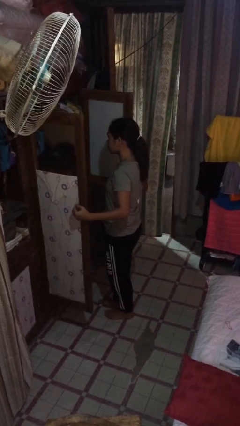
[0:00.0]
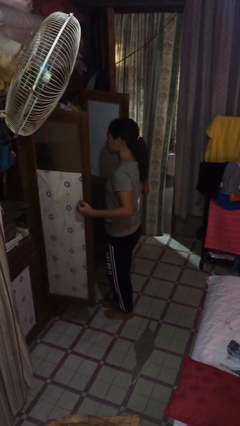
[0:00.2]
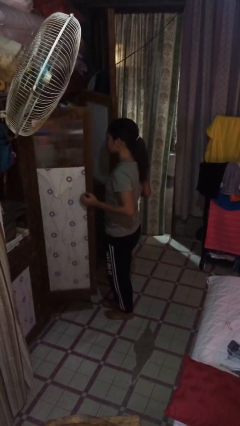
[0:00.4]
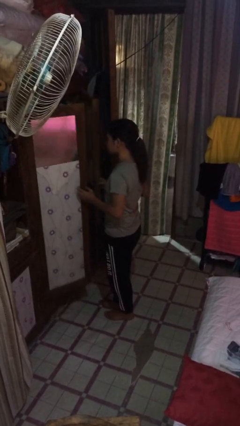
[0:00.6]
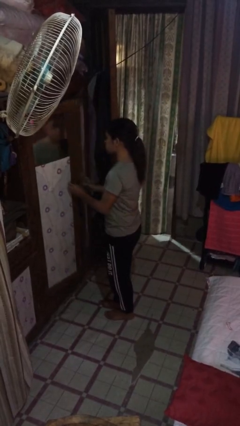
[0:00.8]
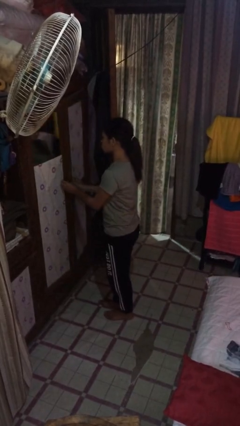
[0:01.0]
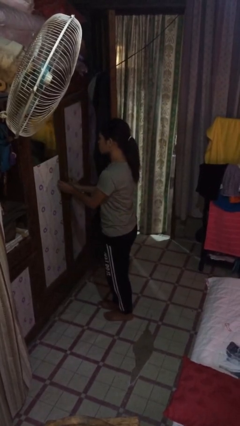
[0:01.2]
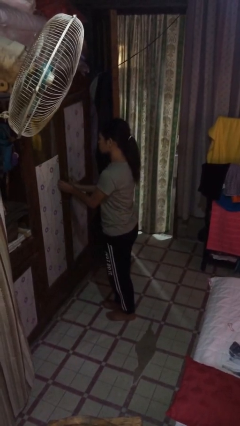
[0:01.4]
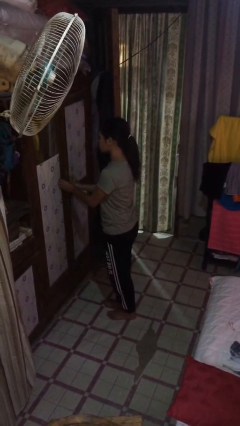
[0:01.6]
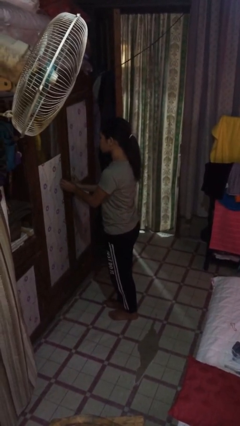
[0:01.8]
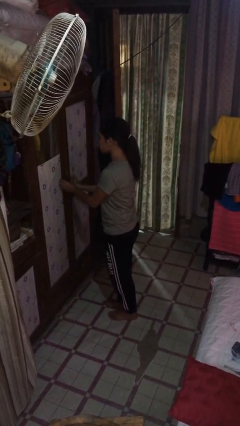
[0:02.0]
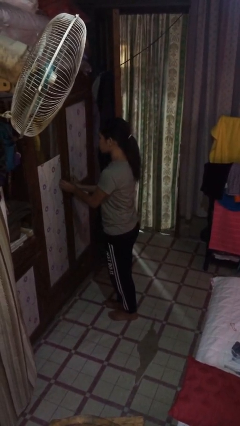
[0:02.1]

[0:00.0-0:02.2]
person closes closet door

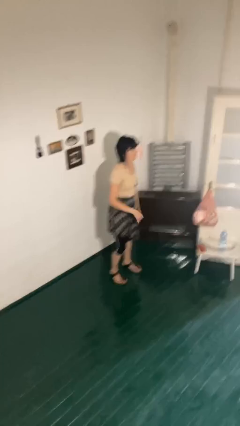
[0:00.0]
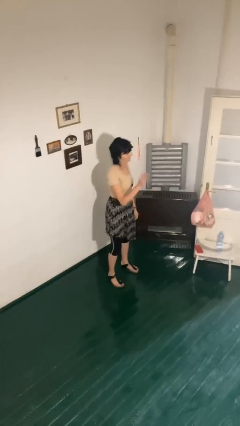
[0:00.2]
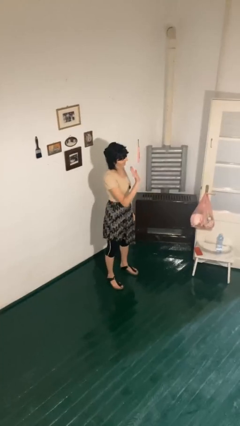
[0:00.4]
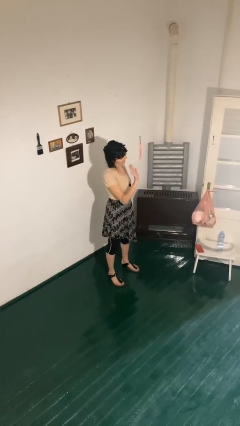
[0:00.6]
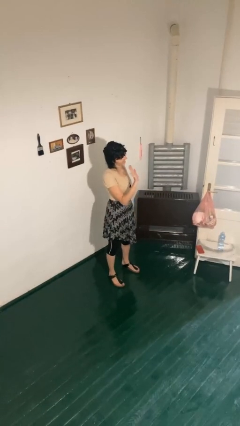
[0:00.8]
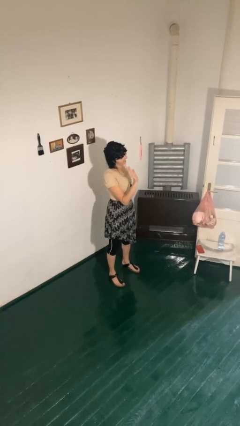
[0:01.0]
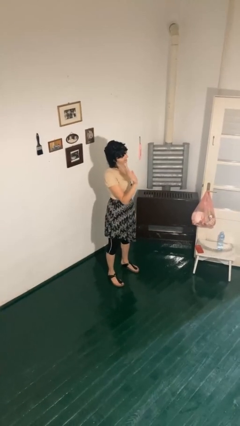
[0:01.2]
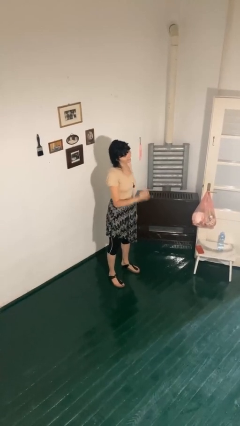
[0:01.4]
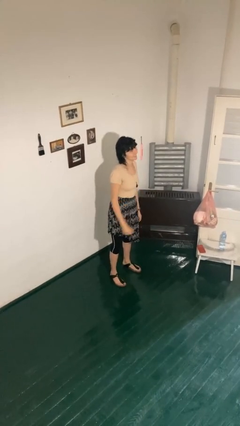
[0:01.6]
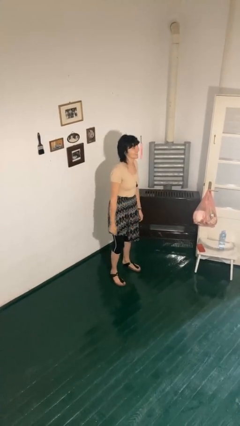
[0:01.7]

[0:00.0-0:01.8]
person waves at person

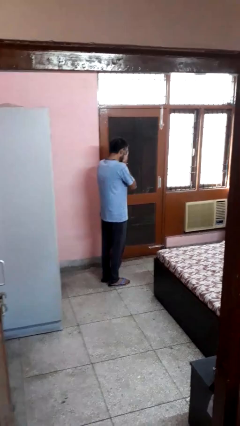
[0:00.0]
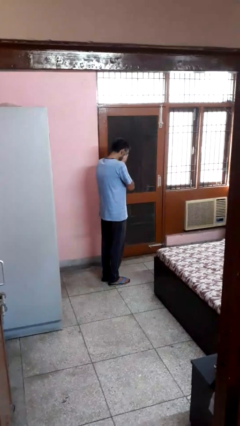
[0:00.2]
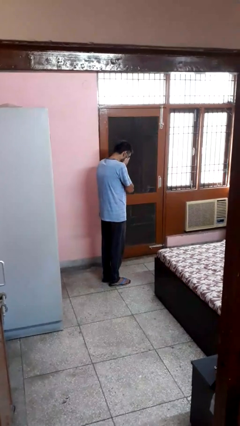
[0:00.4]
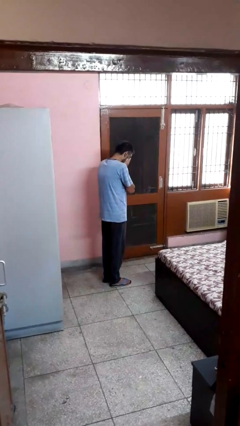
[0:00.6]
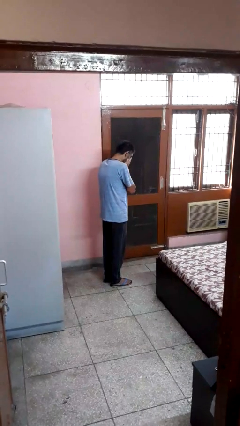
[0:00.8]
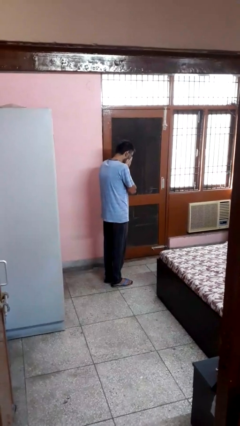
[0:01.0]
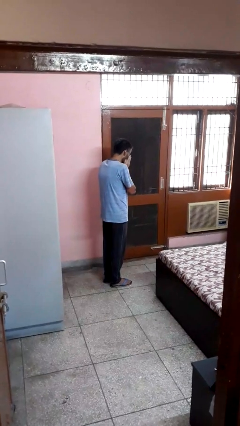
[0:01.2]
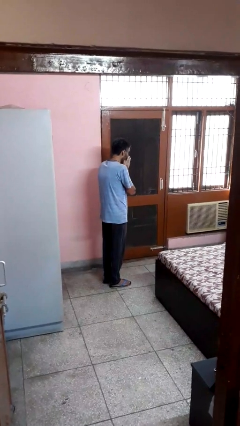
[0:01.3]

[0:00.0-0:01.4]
person sneezes into hand

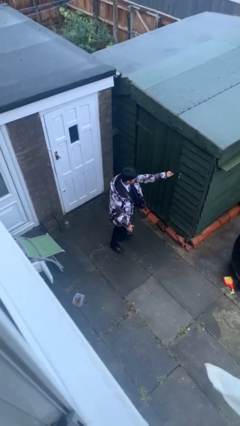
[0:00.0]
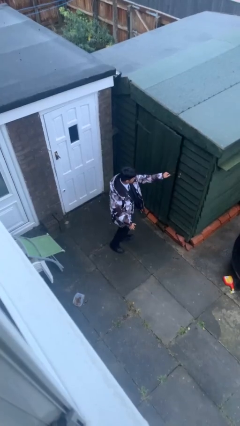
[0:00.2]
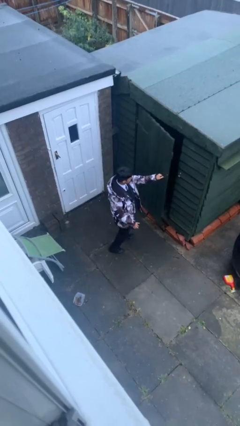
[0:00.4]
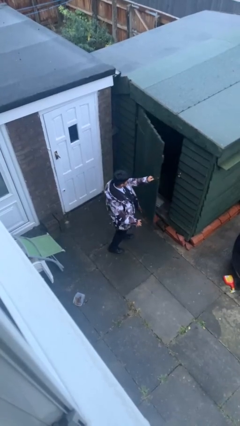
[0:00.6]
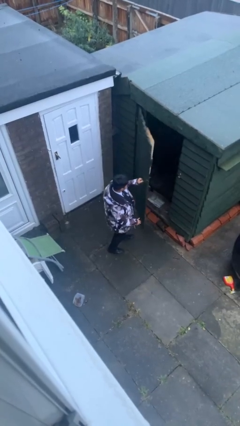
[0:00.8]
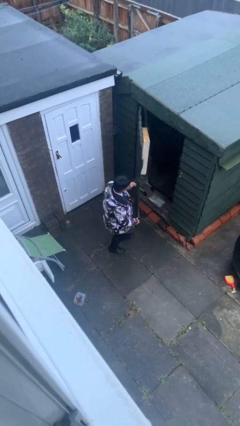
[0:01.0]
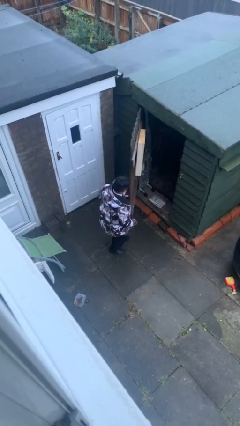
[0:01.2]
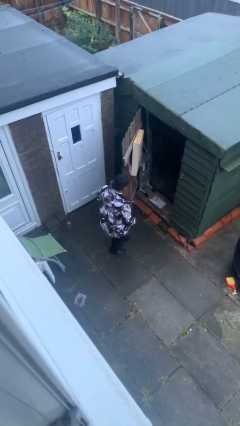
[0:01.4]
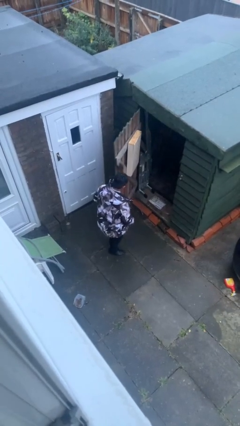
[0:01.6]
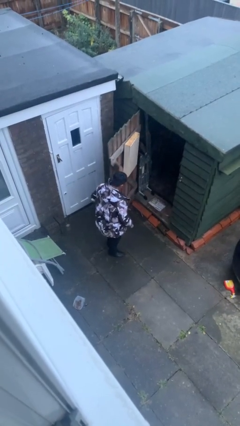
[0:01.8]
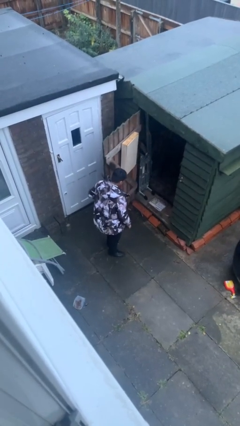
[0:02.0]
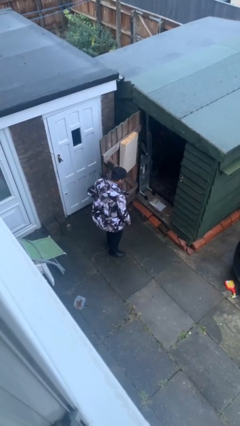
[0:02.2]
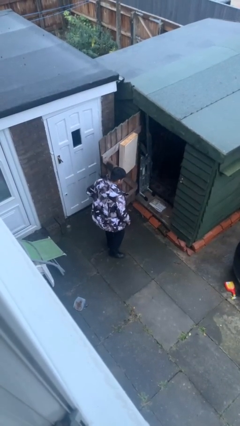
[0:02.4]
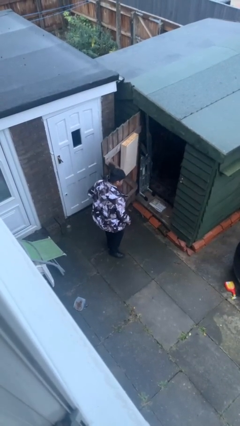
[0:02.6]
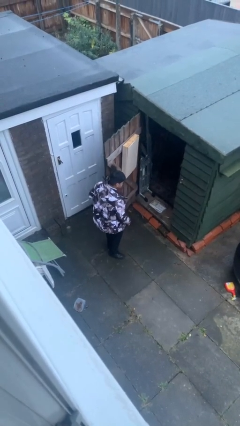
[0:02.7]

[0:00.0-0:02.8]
person opens facility door

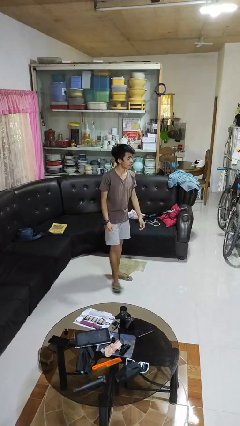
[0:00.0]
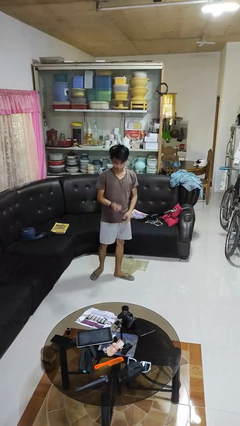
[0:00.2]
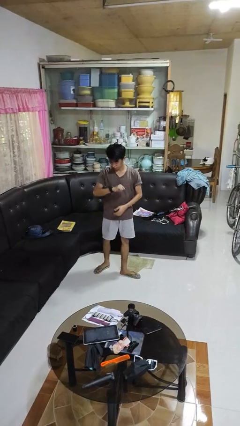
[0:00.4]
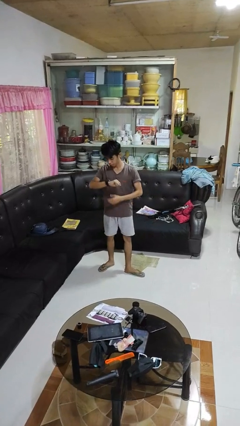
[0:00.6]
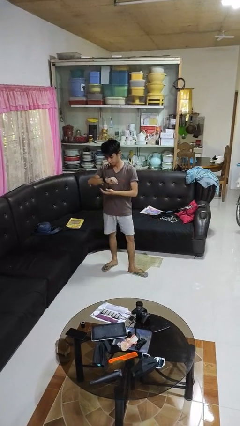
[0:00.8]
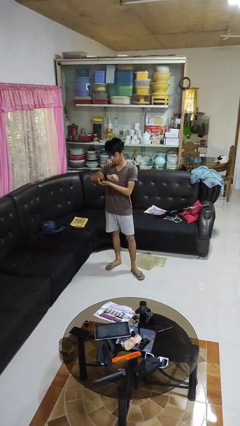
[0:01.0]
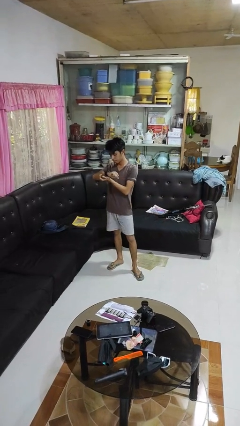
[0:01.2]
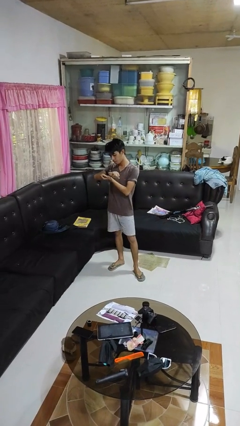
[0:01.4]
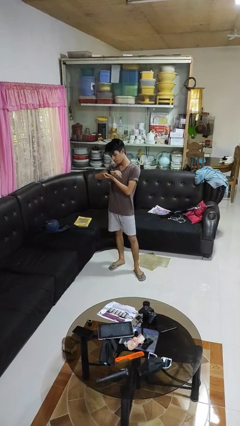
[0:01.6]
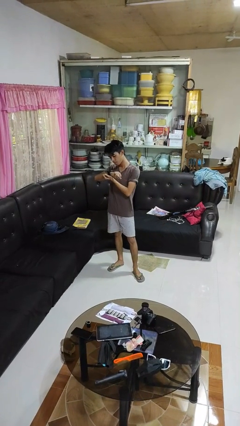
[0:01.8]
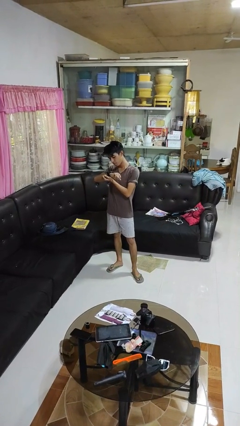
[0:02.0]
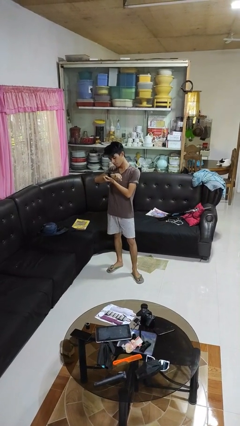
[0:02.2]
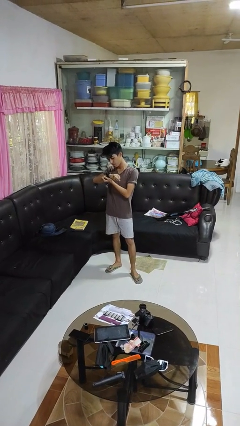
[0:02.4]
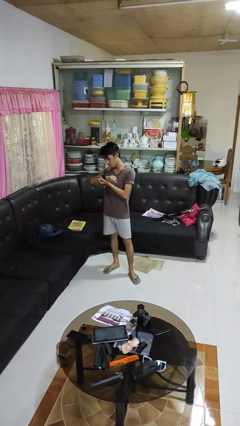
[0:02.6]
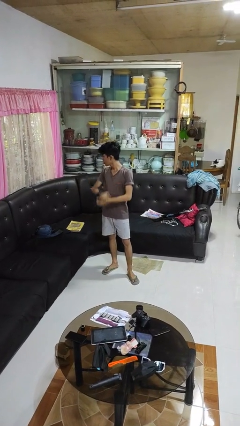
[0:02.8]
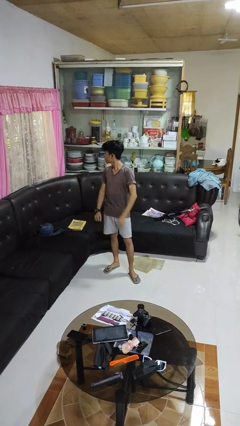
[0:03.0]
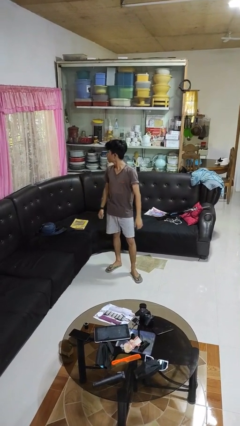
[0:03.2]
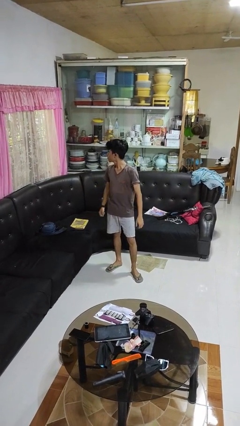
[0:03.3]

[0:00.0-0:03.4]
person looks at wristwatch

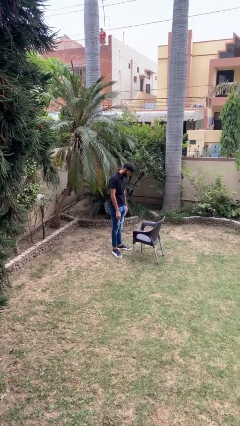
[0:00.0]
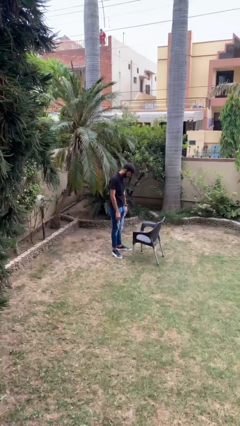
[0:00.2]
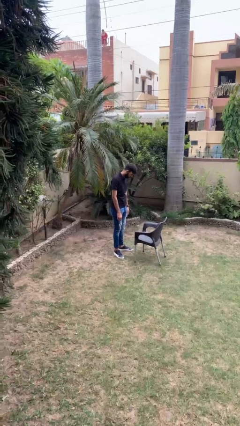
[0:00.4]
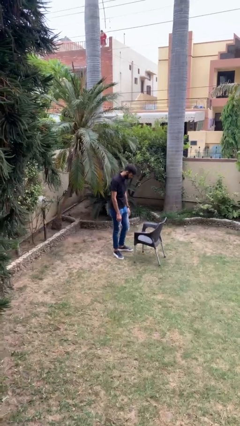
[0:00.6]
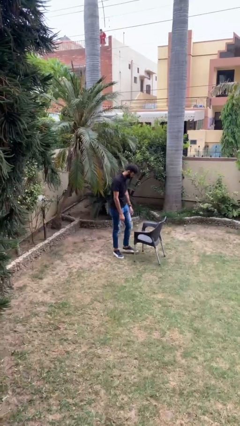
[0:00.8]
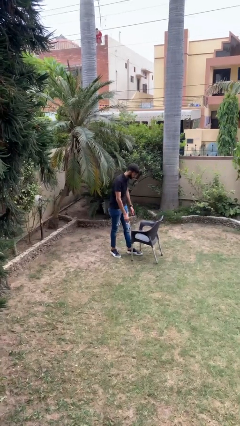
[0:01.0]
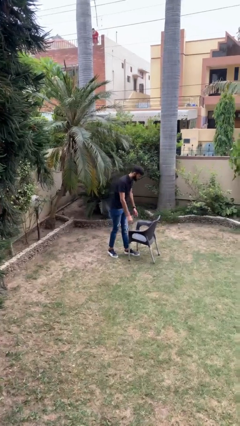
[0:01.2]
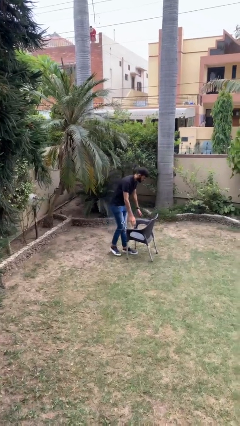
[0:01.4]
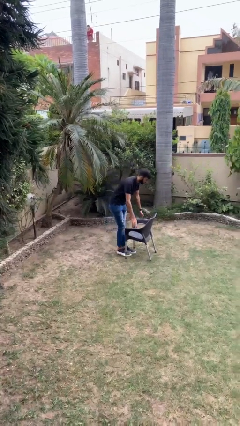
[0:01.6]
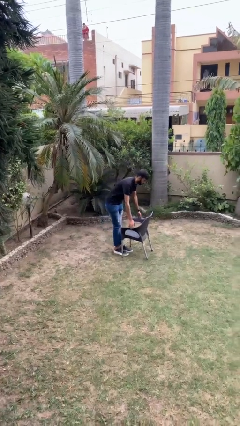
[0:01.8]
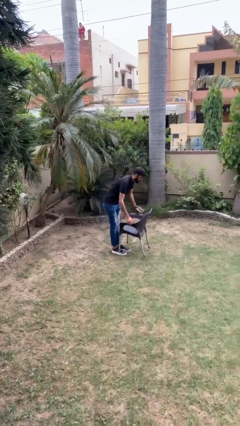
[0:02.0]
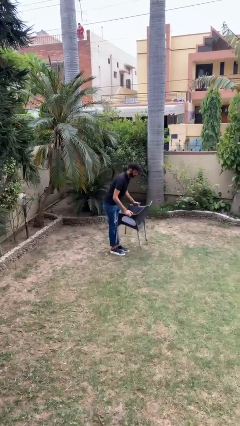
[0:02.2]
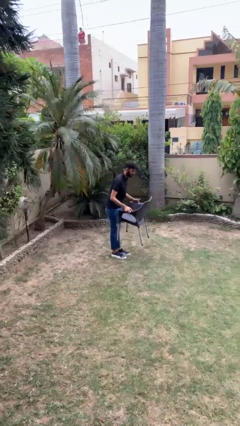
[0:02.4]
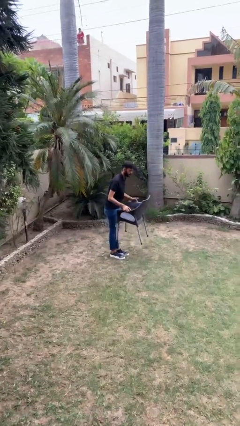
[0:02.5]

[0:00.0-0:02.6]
person picks up object from floor

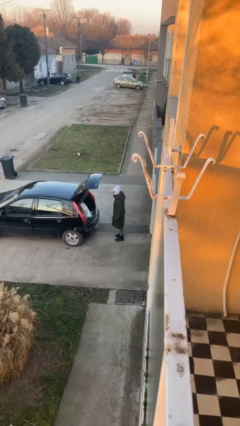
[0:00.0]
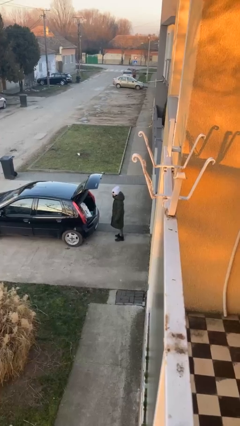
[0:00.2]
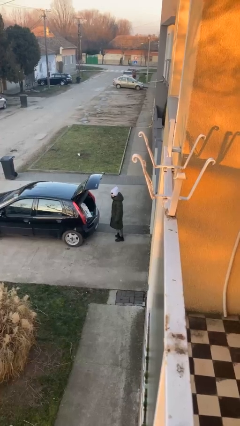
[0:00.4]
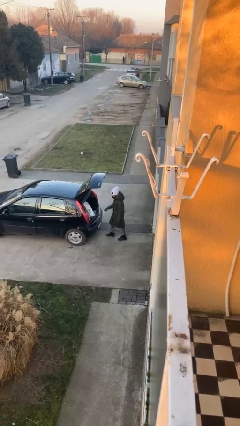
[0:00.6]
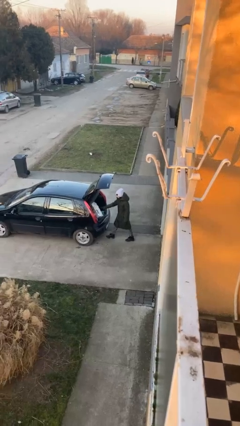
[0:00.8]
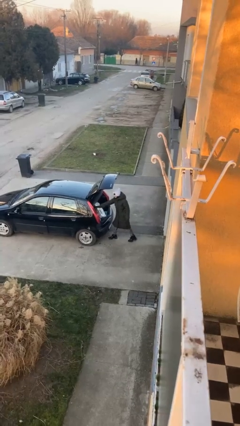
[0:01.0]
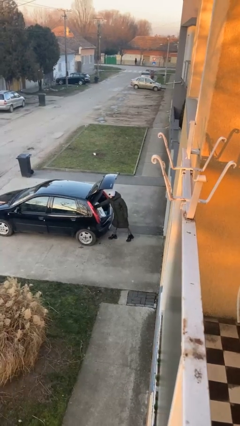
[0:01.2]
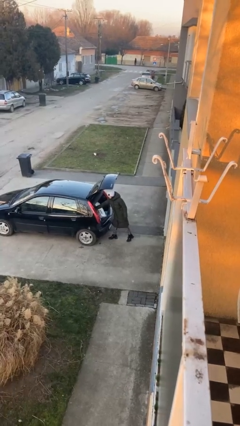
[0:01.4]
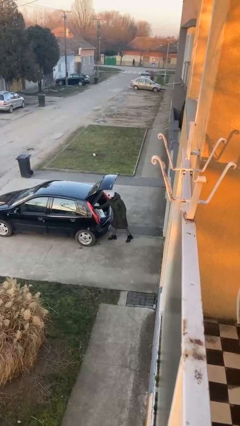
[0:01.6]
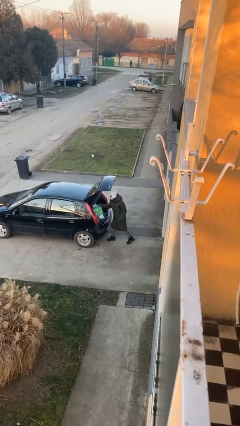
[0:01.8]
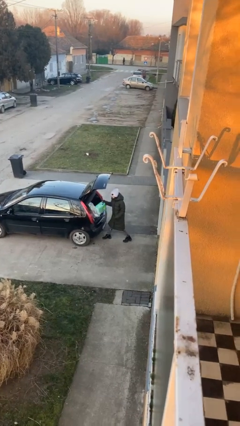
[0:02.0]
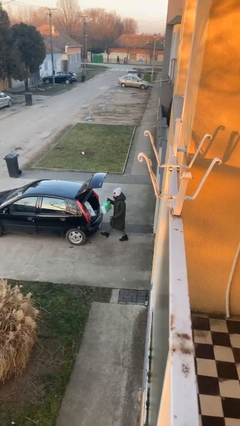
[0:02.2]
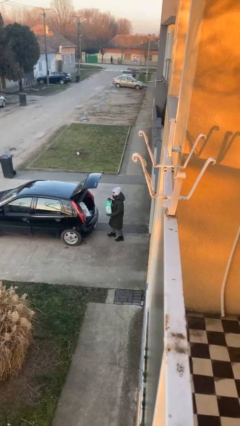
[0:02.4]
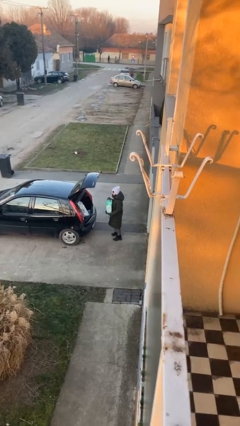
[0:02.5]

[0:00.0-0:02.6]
person unloads car
